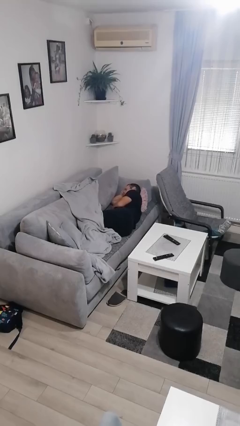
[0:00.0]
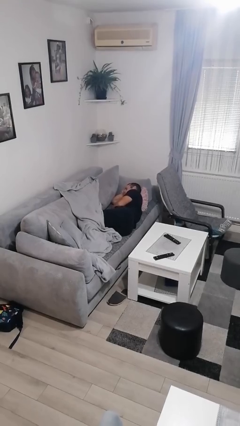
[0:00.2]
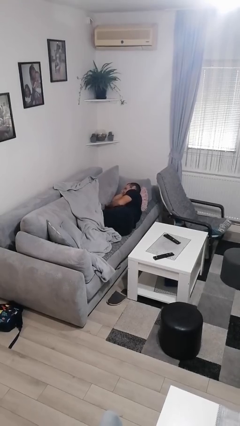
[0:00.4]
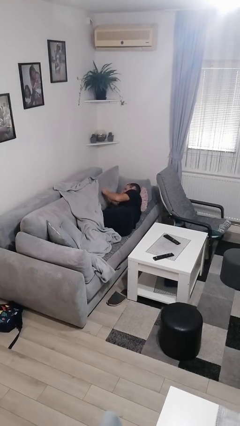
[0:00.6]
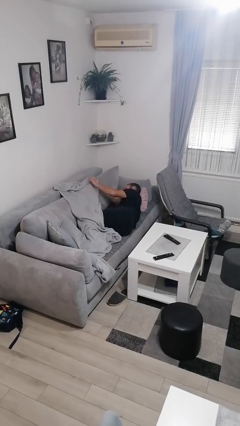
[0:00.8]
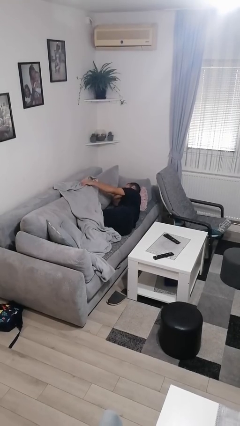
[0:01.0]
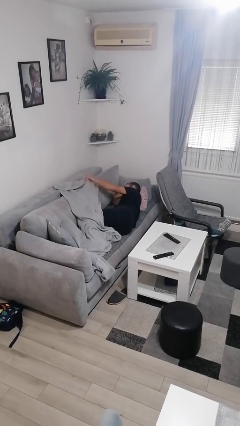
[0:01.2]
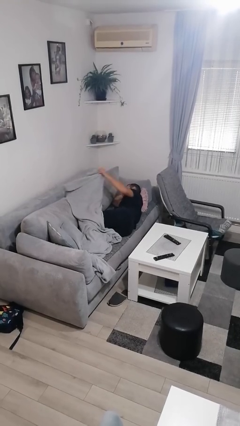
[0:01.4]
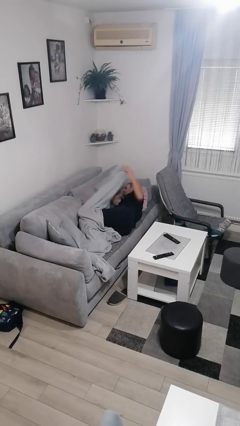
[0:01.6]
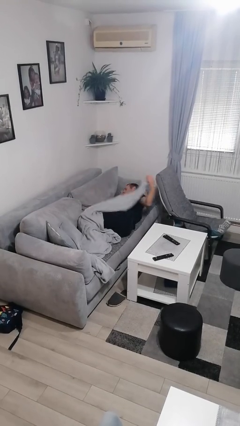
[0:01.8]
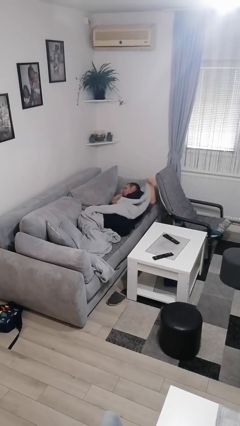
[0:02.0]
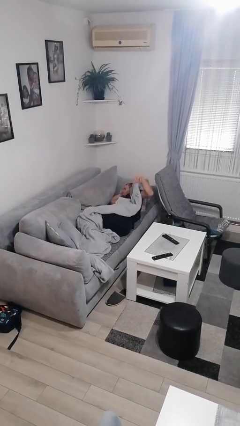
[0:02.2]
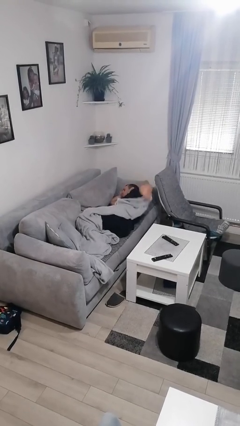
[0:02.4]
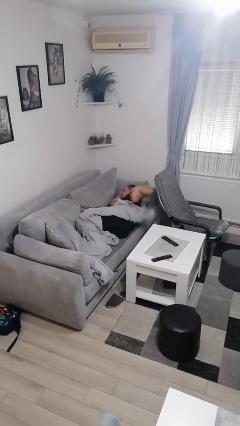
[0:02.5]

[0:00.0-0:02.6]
person covers with blanket

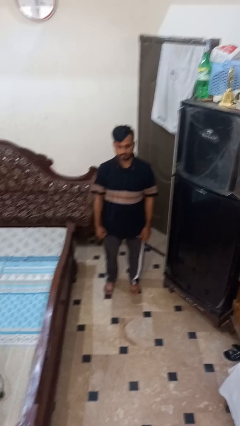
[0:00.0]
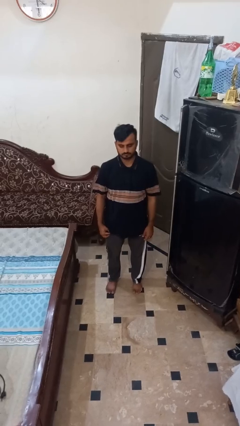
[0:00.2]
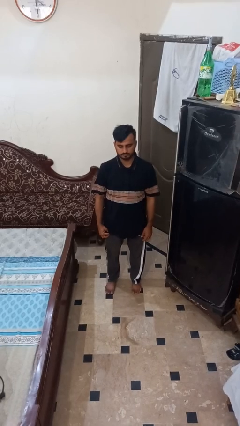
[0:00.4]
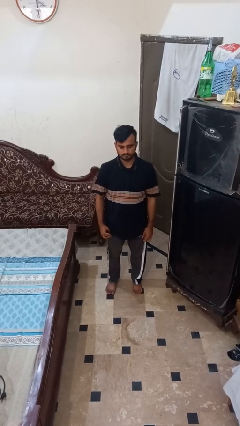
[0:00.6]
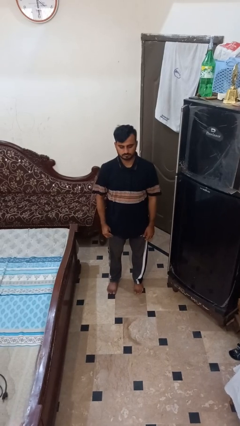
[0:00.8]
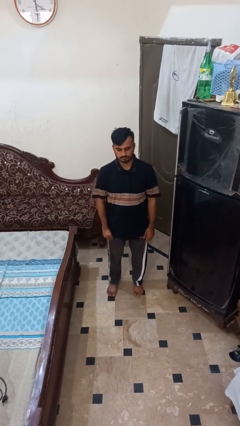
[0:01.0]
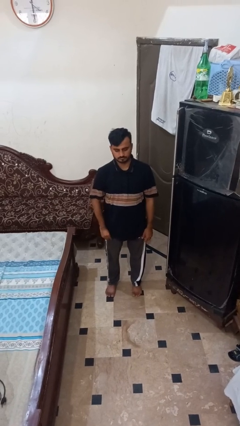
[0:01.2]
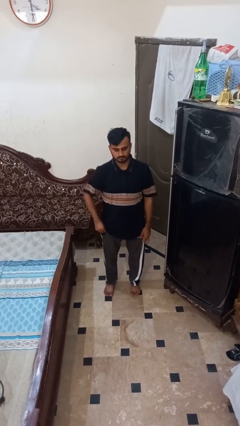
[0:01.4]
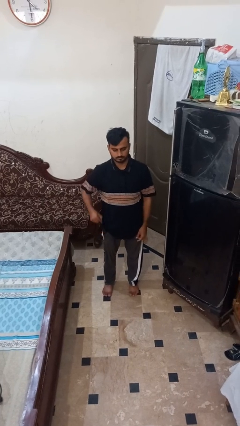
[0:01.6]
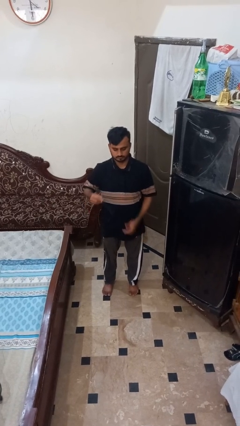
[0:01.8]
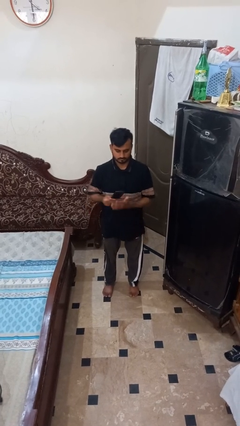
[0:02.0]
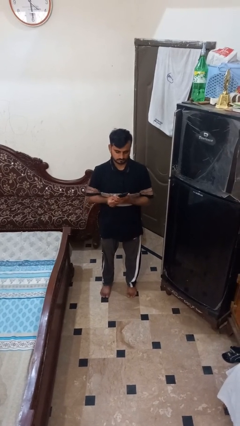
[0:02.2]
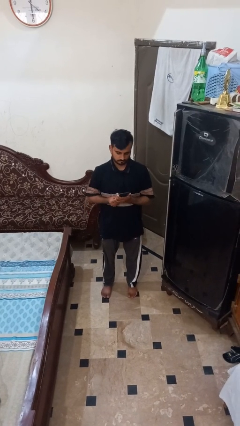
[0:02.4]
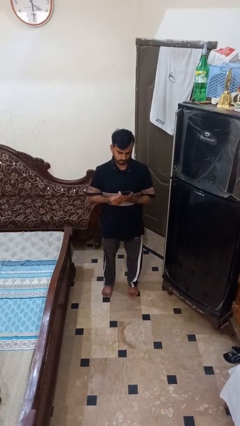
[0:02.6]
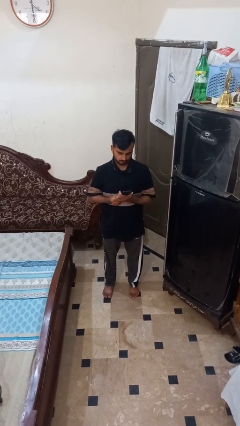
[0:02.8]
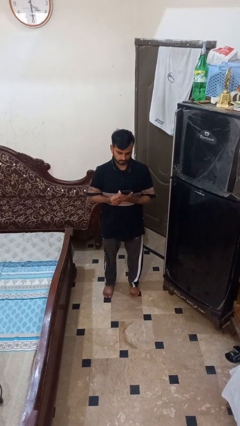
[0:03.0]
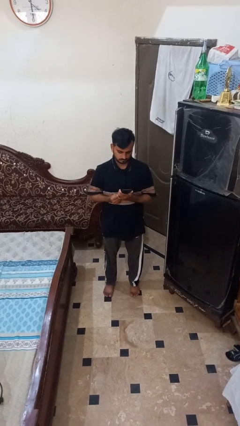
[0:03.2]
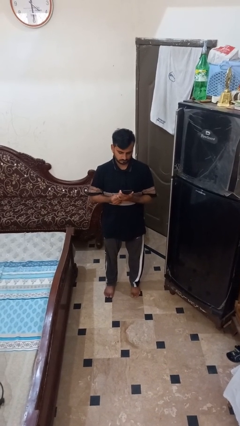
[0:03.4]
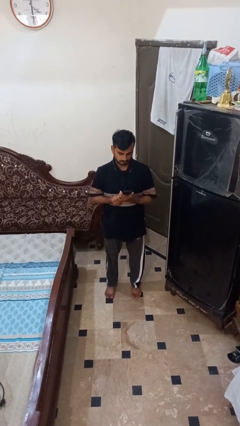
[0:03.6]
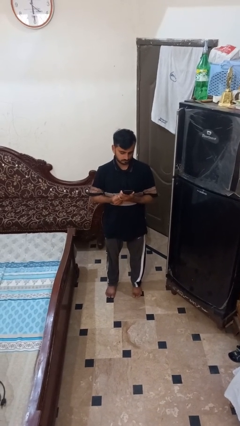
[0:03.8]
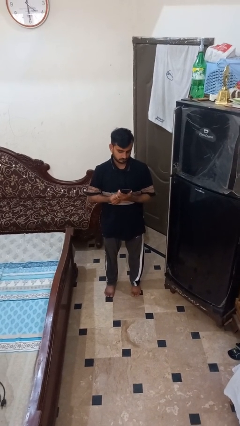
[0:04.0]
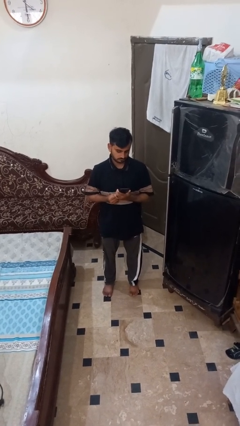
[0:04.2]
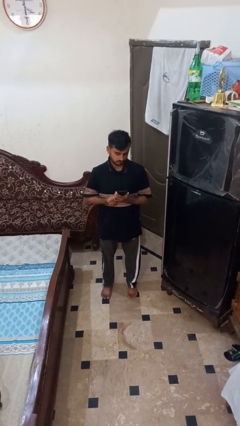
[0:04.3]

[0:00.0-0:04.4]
person takes phone from pocket

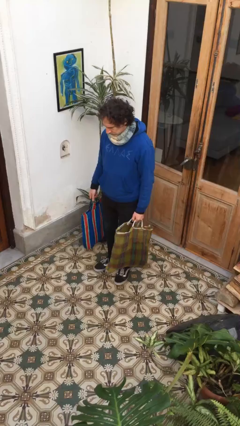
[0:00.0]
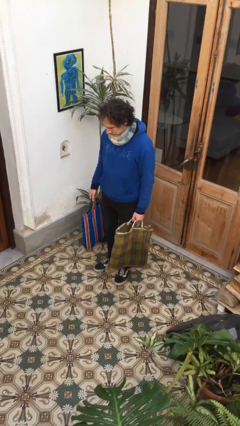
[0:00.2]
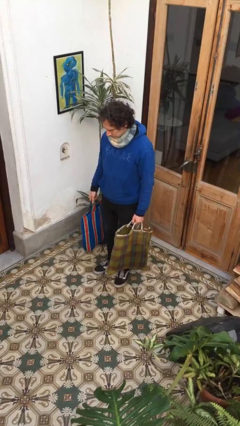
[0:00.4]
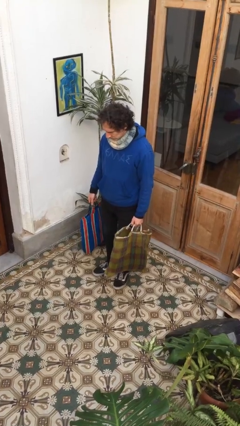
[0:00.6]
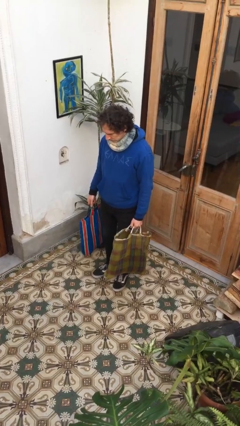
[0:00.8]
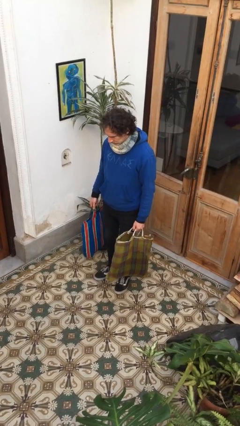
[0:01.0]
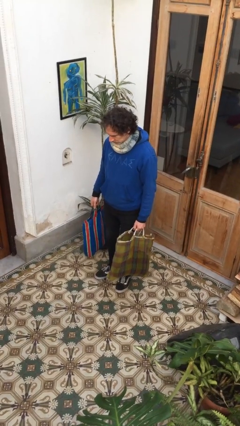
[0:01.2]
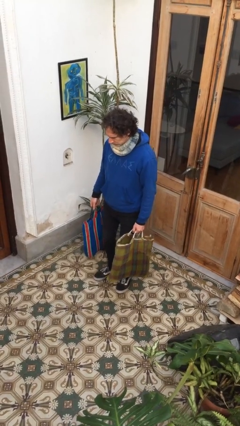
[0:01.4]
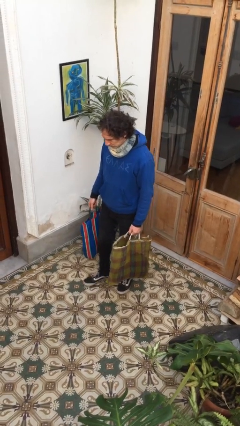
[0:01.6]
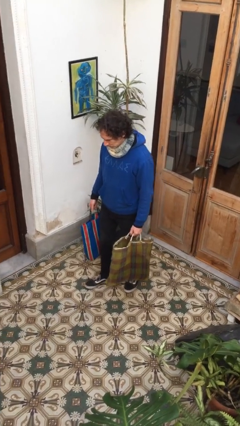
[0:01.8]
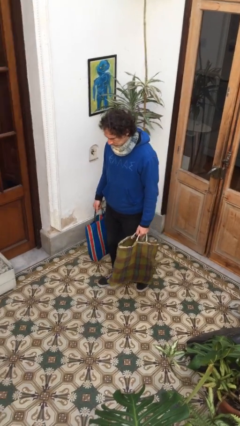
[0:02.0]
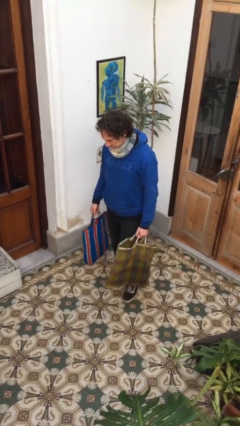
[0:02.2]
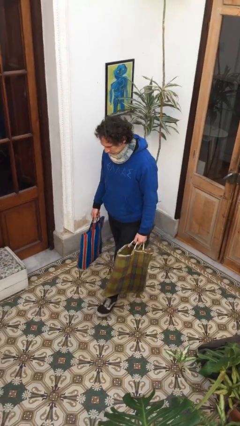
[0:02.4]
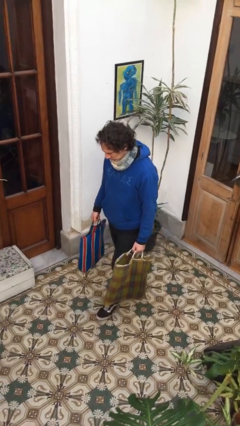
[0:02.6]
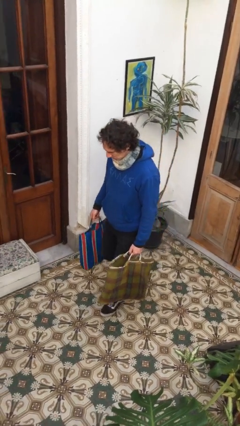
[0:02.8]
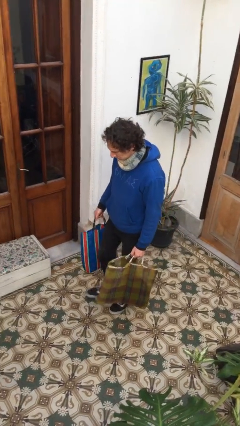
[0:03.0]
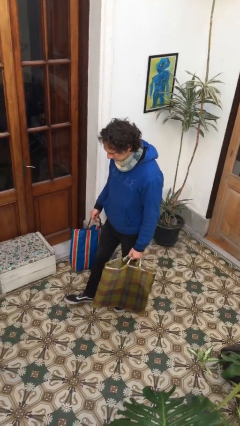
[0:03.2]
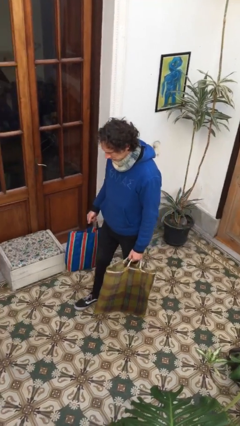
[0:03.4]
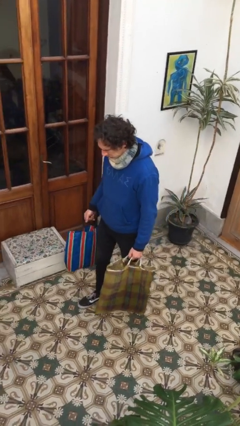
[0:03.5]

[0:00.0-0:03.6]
person carries groceries

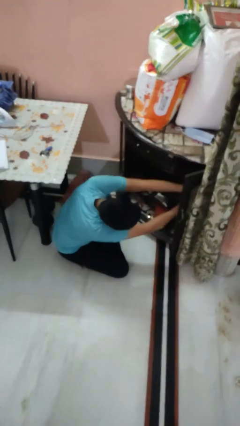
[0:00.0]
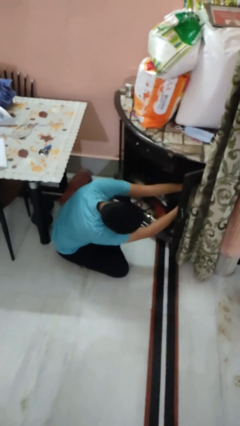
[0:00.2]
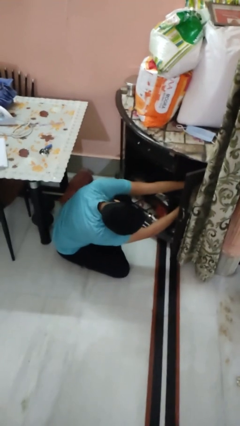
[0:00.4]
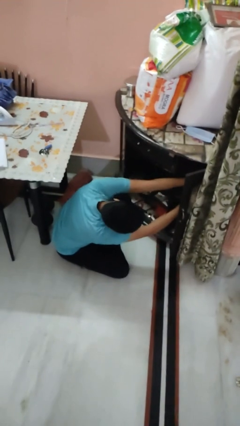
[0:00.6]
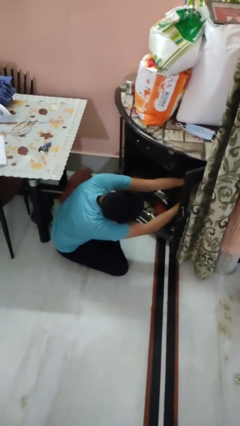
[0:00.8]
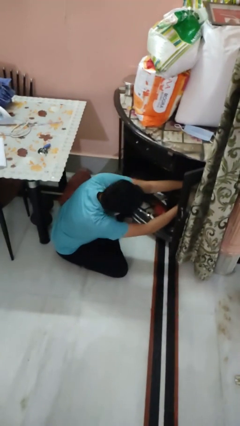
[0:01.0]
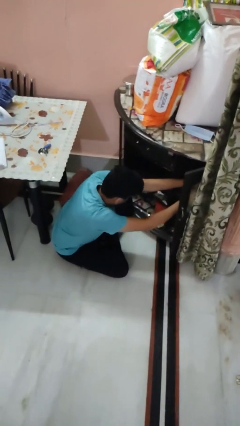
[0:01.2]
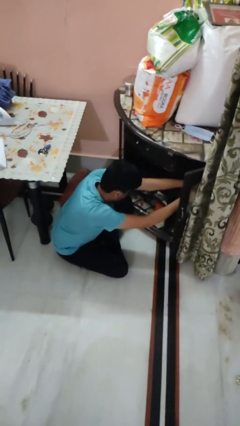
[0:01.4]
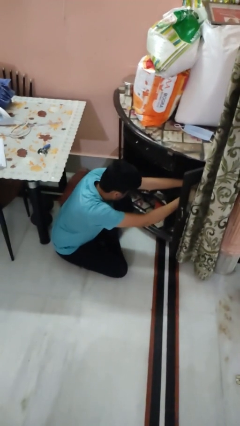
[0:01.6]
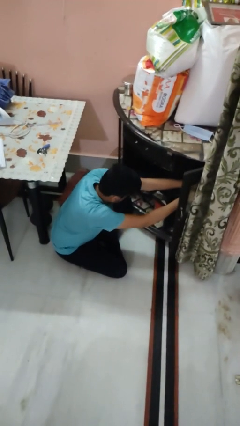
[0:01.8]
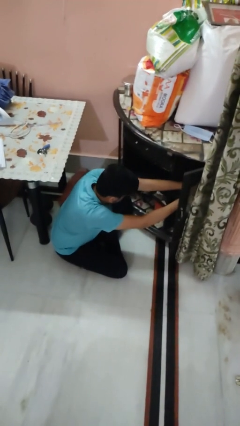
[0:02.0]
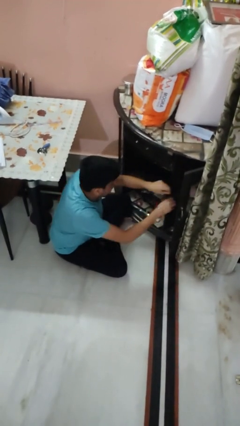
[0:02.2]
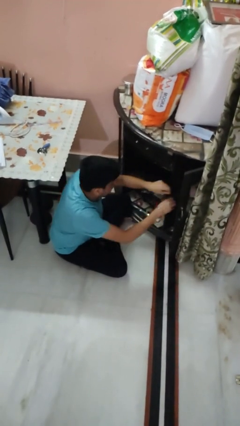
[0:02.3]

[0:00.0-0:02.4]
person searches in cabinet

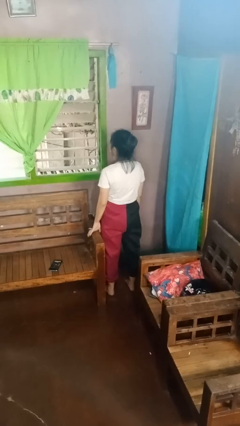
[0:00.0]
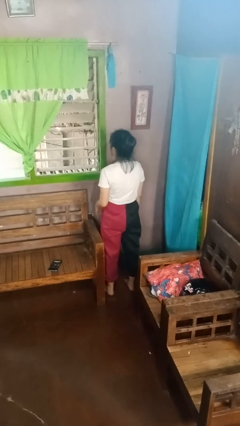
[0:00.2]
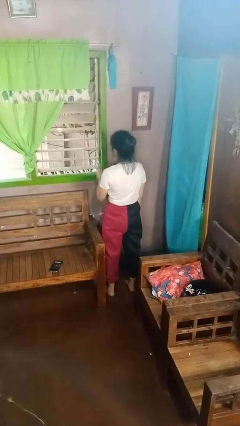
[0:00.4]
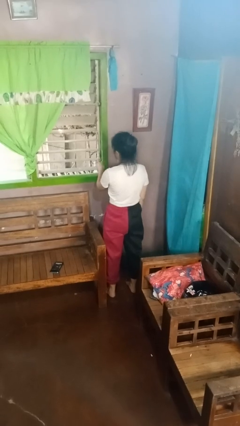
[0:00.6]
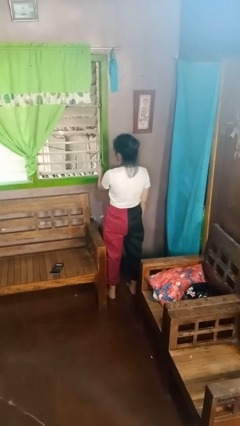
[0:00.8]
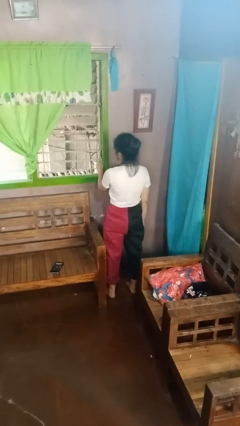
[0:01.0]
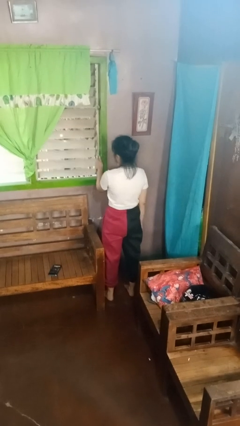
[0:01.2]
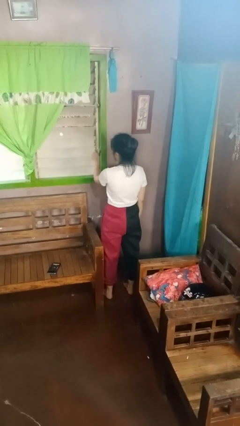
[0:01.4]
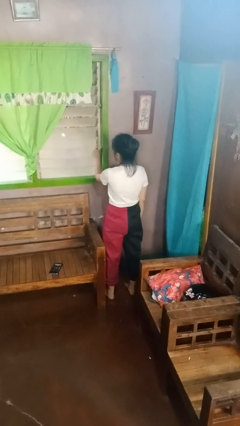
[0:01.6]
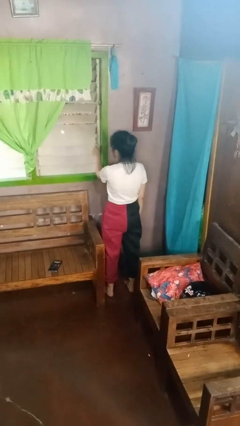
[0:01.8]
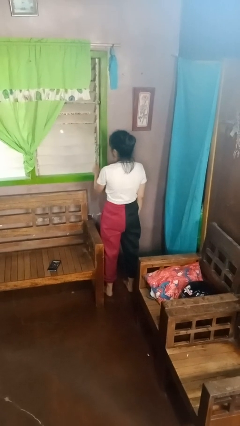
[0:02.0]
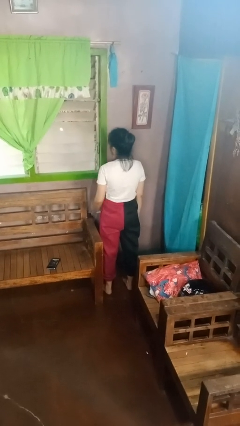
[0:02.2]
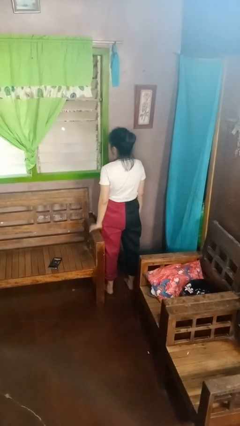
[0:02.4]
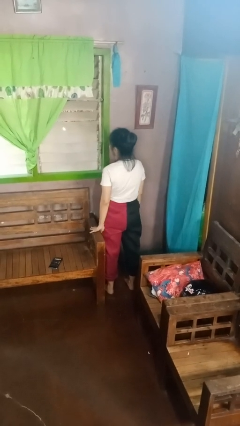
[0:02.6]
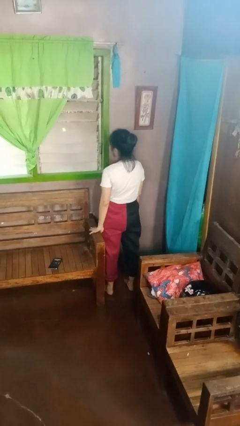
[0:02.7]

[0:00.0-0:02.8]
person closes home window

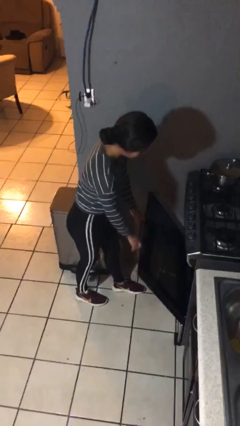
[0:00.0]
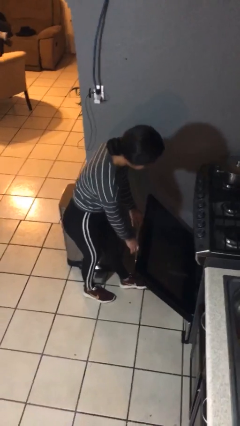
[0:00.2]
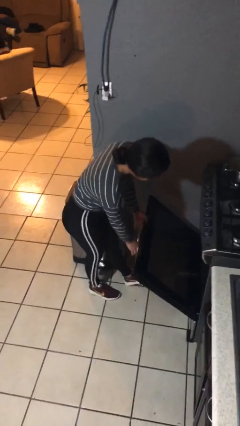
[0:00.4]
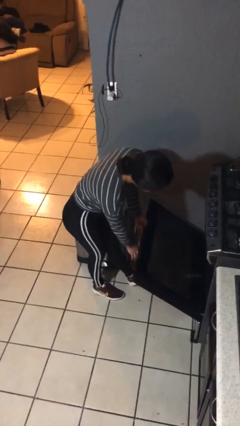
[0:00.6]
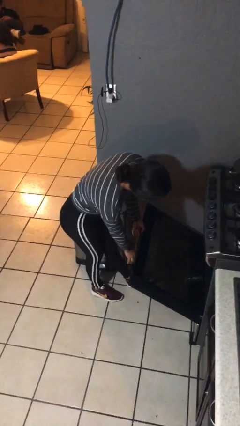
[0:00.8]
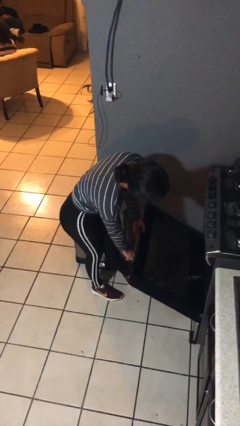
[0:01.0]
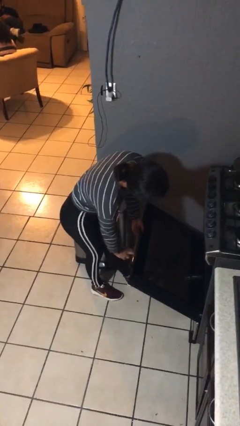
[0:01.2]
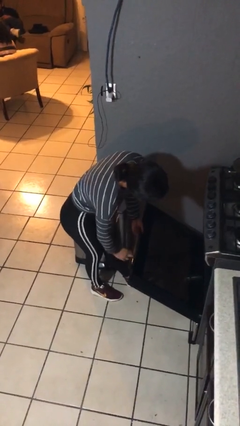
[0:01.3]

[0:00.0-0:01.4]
person opens oven door
